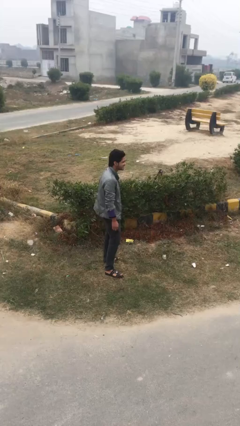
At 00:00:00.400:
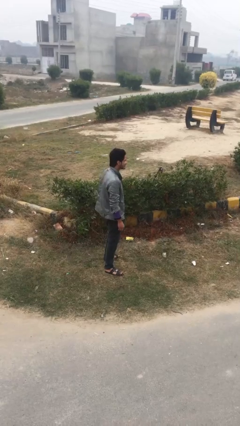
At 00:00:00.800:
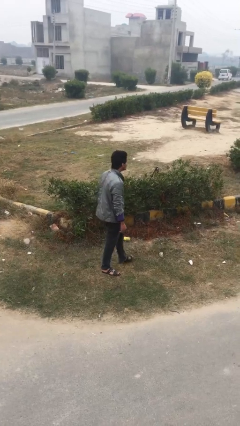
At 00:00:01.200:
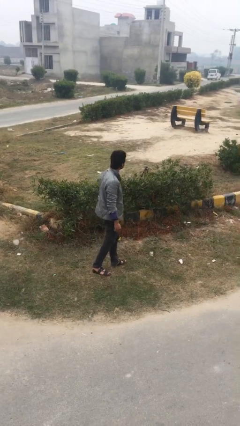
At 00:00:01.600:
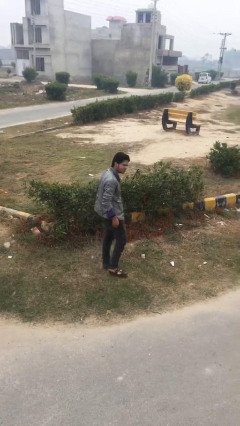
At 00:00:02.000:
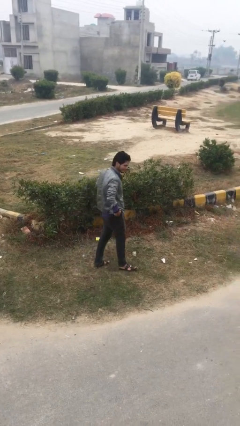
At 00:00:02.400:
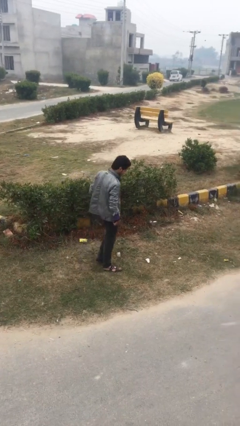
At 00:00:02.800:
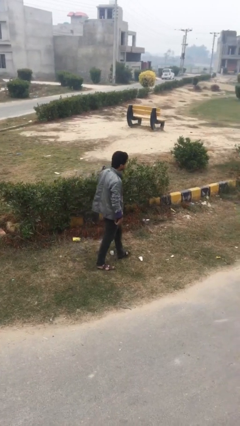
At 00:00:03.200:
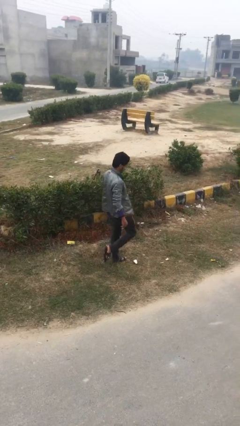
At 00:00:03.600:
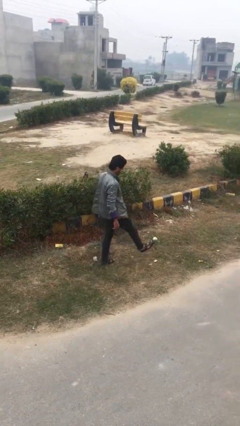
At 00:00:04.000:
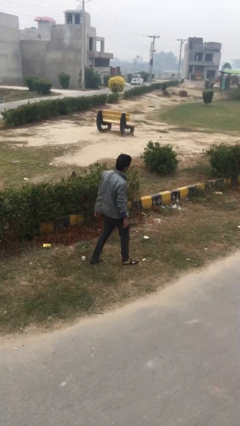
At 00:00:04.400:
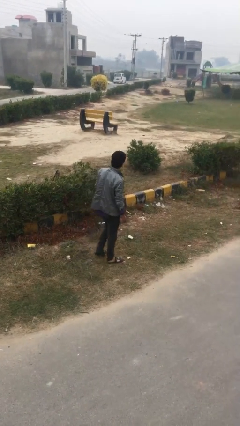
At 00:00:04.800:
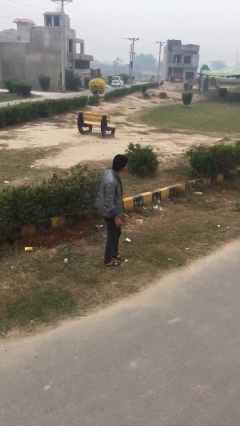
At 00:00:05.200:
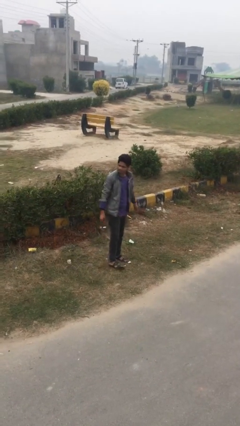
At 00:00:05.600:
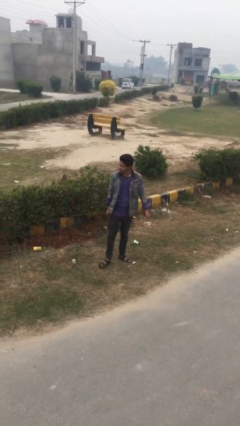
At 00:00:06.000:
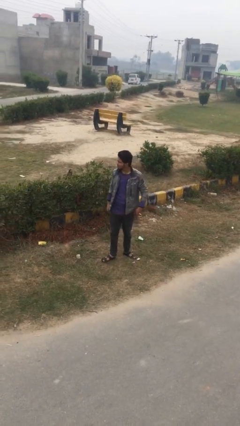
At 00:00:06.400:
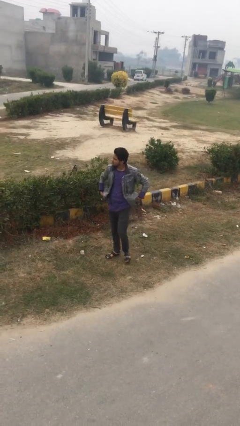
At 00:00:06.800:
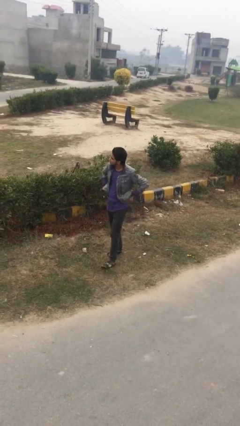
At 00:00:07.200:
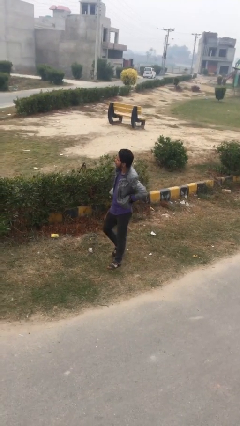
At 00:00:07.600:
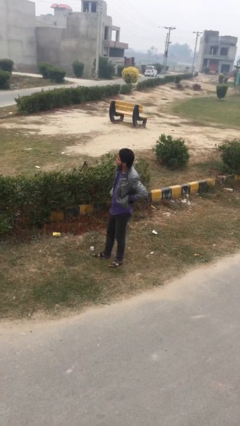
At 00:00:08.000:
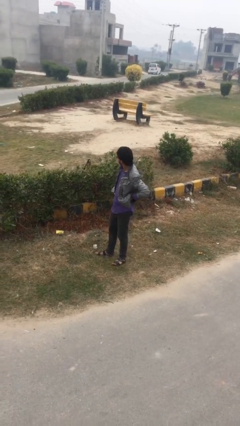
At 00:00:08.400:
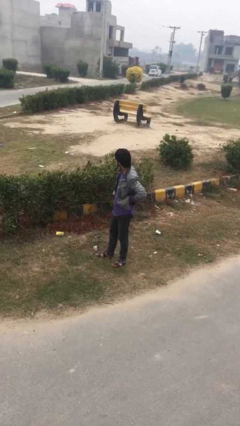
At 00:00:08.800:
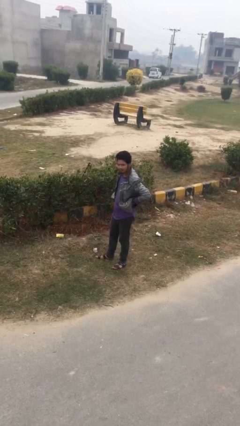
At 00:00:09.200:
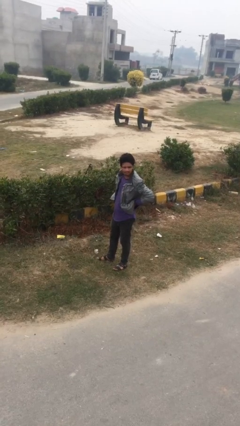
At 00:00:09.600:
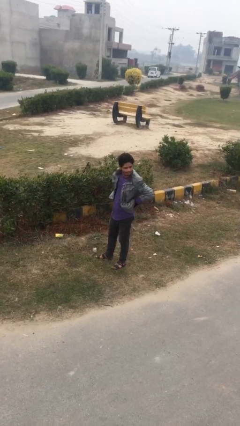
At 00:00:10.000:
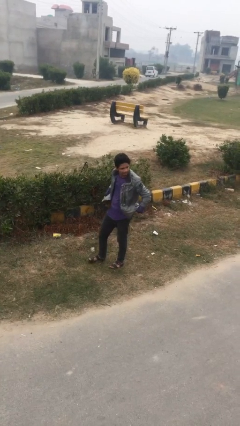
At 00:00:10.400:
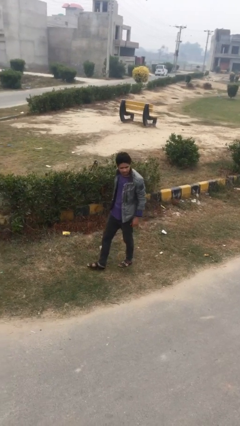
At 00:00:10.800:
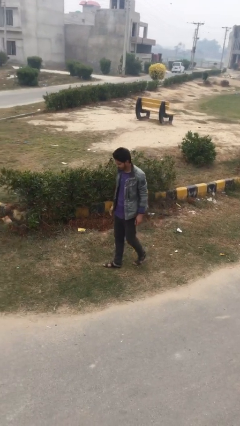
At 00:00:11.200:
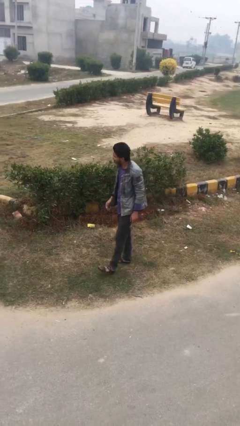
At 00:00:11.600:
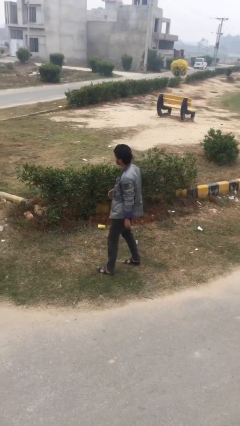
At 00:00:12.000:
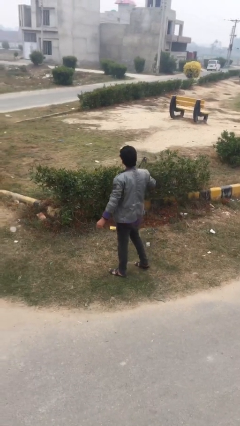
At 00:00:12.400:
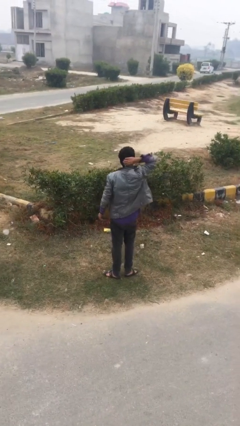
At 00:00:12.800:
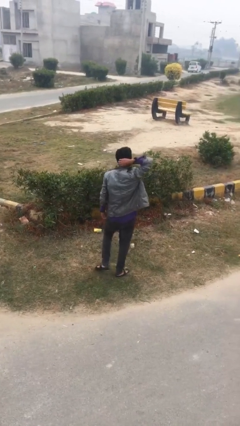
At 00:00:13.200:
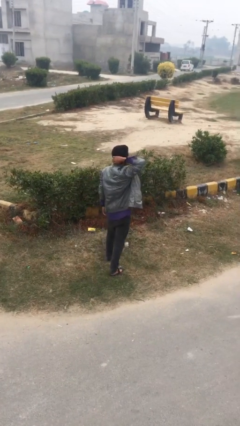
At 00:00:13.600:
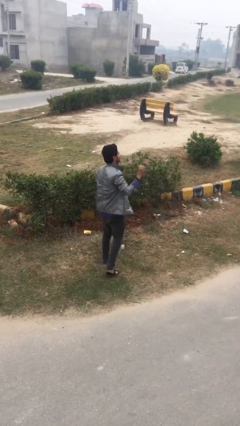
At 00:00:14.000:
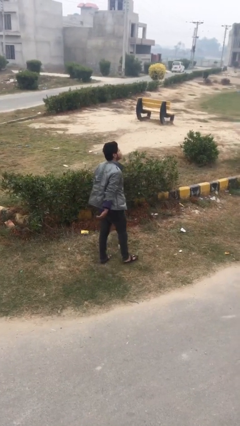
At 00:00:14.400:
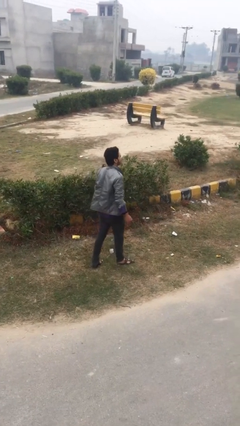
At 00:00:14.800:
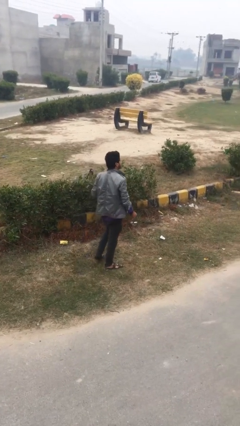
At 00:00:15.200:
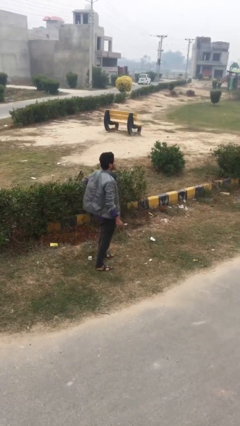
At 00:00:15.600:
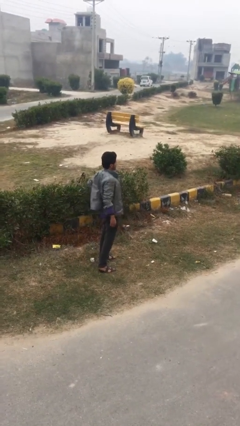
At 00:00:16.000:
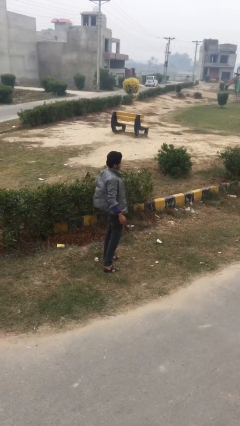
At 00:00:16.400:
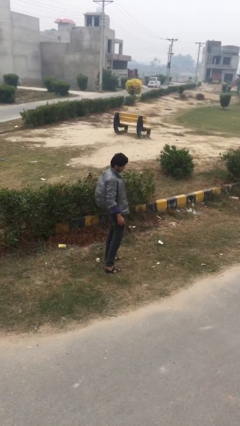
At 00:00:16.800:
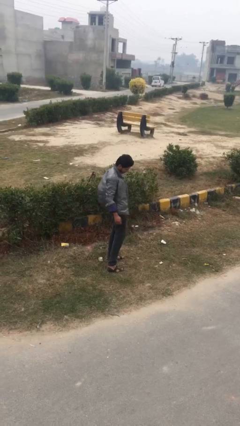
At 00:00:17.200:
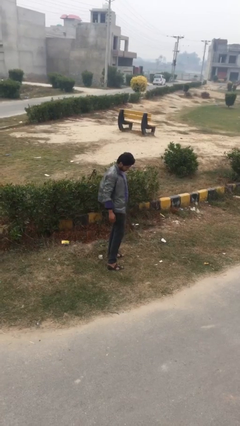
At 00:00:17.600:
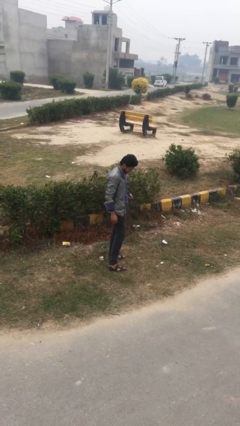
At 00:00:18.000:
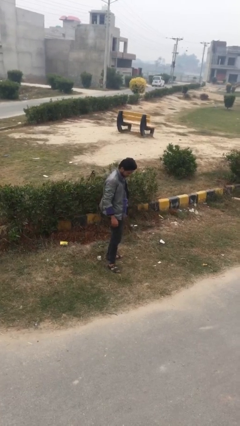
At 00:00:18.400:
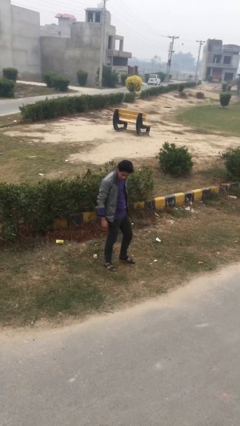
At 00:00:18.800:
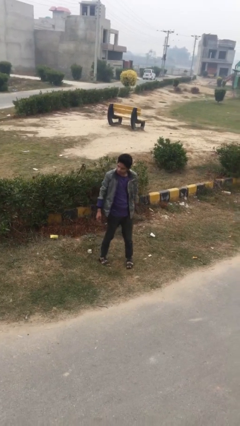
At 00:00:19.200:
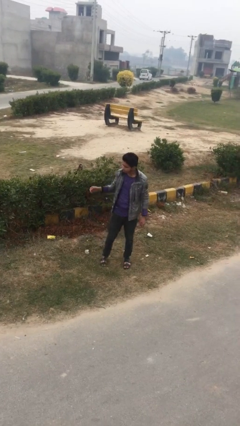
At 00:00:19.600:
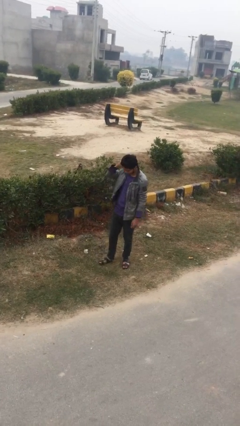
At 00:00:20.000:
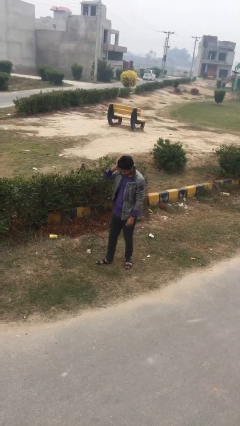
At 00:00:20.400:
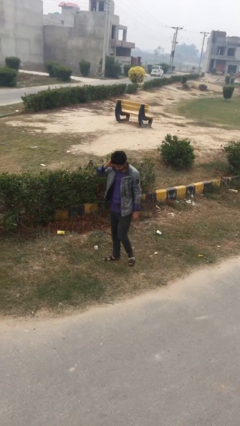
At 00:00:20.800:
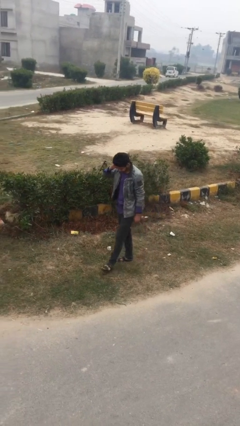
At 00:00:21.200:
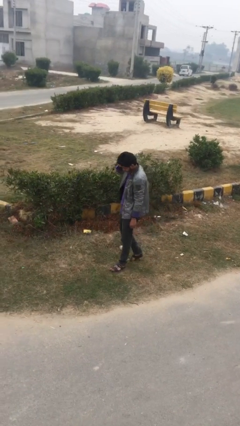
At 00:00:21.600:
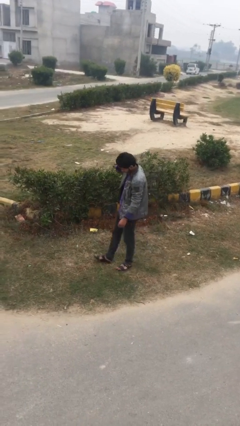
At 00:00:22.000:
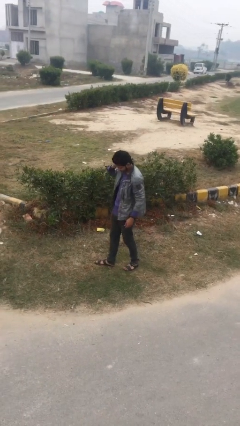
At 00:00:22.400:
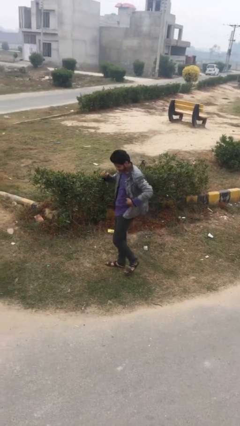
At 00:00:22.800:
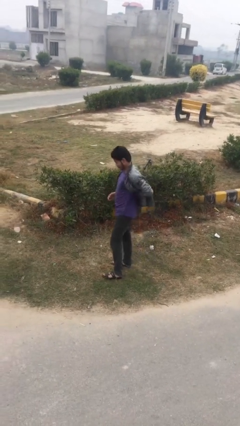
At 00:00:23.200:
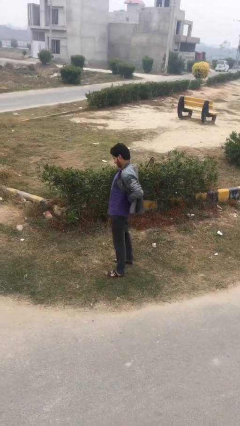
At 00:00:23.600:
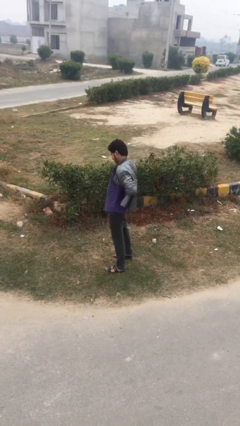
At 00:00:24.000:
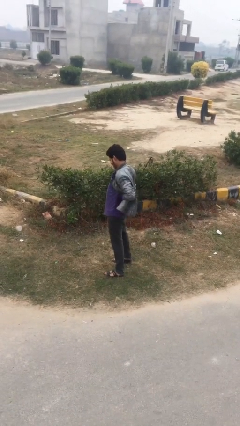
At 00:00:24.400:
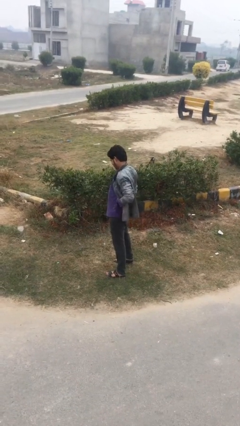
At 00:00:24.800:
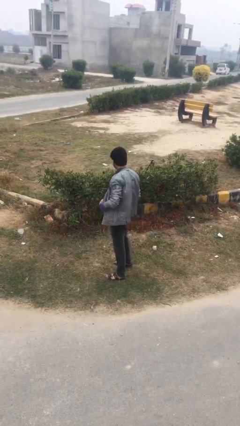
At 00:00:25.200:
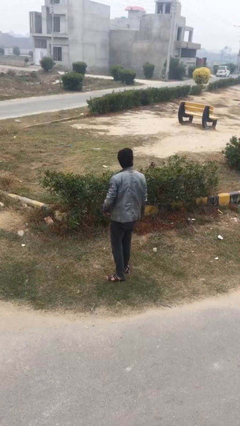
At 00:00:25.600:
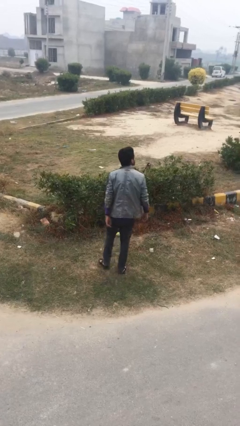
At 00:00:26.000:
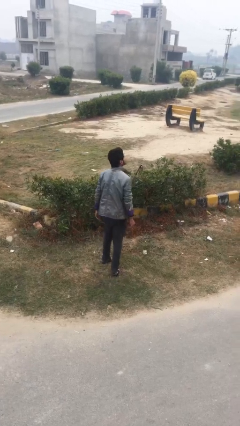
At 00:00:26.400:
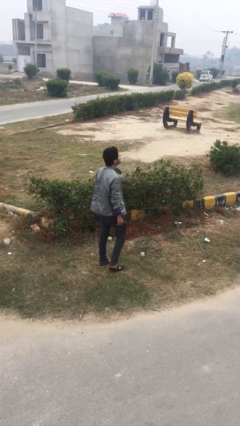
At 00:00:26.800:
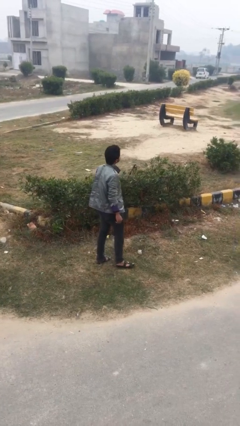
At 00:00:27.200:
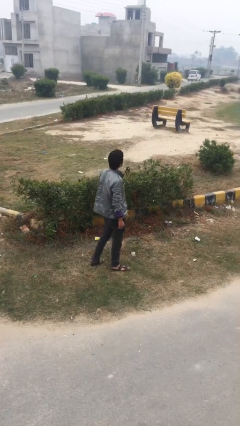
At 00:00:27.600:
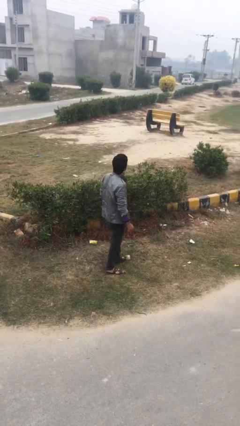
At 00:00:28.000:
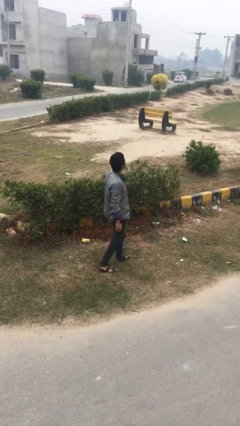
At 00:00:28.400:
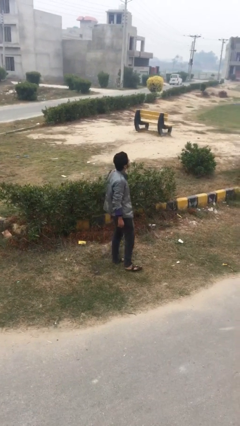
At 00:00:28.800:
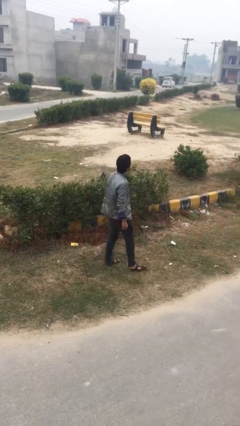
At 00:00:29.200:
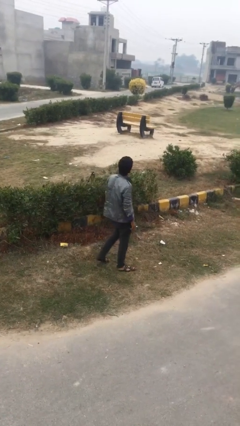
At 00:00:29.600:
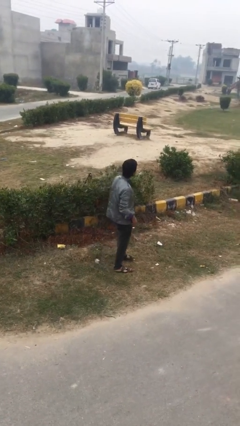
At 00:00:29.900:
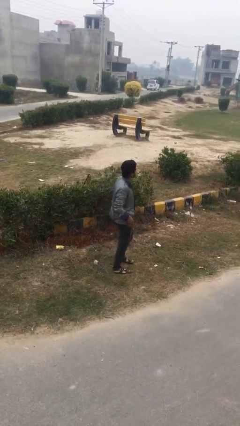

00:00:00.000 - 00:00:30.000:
person walks

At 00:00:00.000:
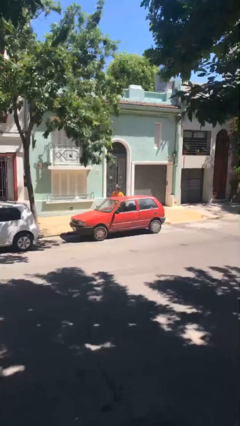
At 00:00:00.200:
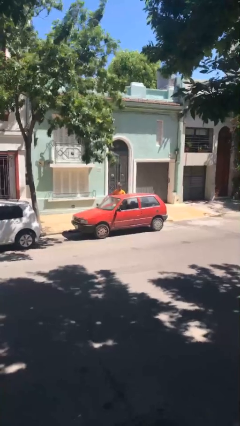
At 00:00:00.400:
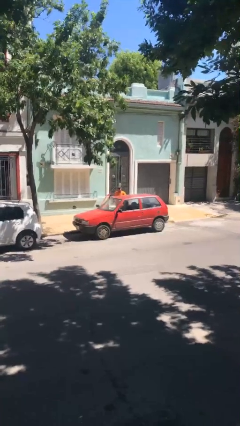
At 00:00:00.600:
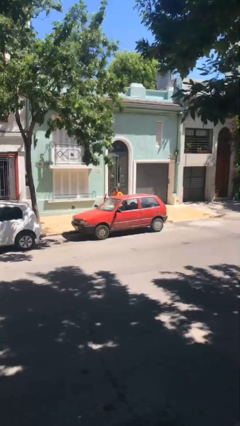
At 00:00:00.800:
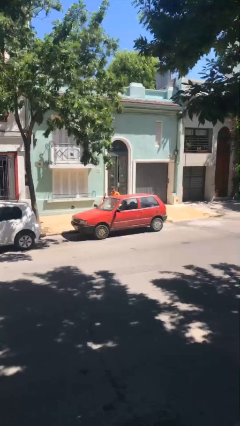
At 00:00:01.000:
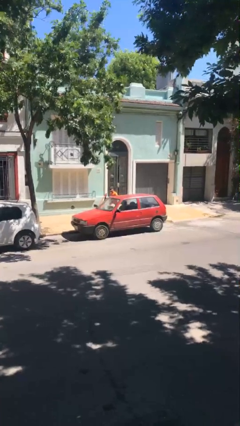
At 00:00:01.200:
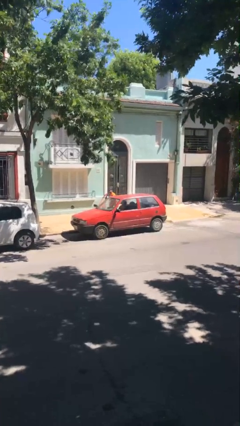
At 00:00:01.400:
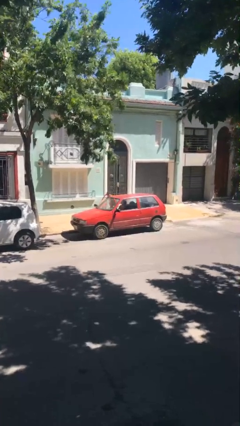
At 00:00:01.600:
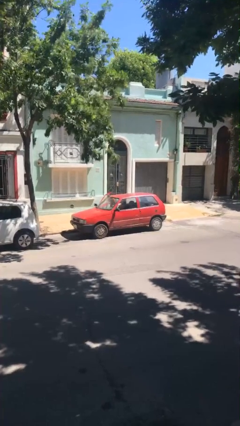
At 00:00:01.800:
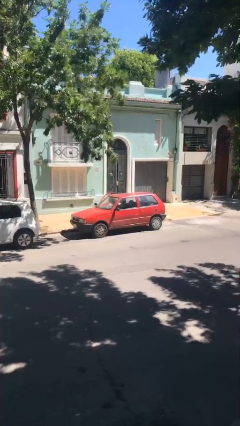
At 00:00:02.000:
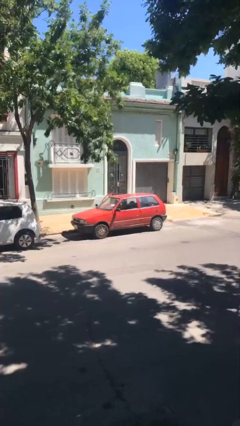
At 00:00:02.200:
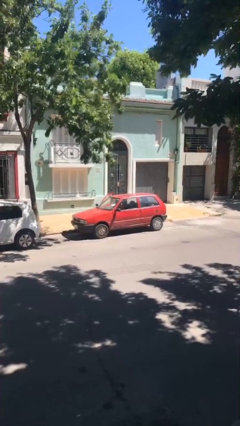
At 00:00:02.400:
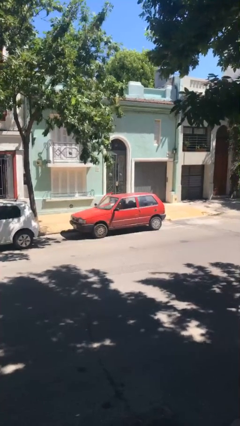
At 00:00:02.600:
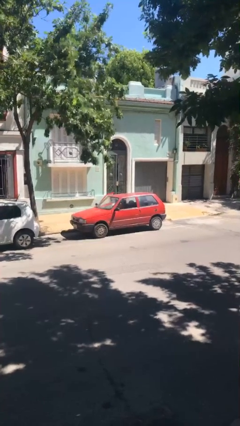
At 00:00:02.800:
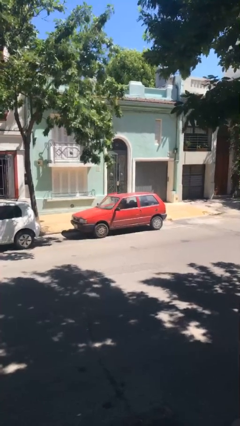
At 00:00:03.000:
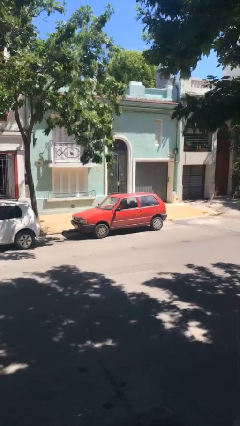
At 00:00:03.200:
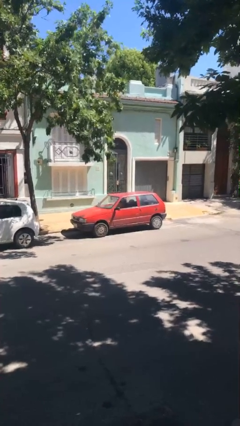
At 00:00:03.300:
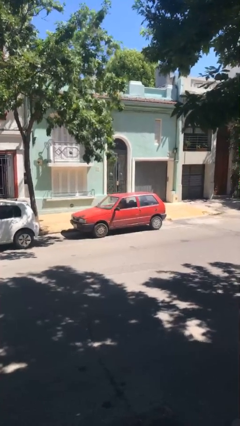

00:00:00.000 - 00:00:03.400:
car picks up person
